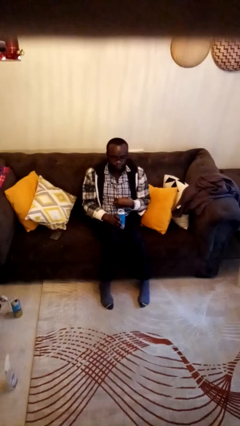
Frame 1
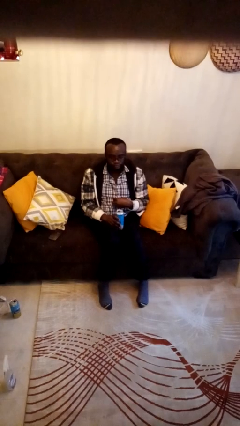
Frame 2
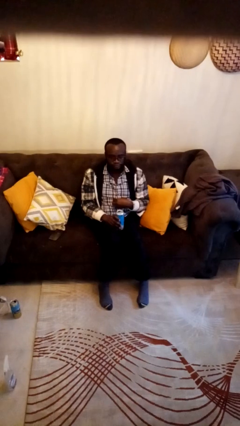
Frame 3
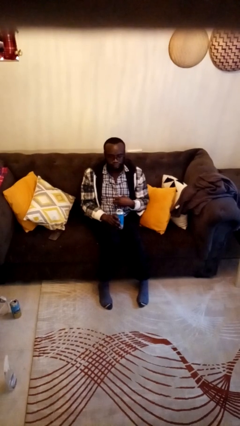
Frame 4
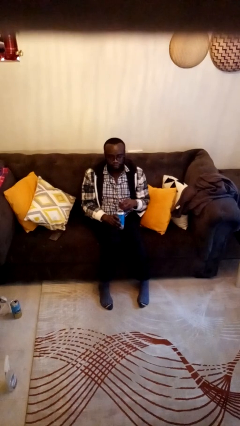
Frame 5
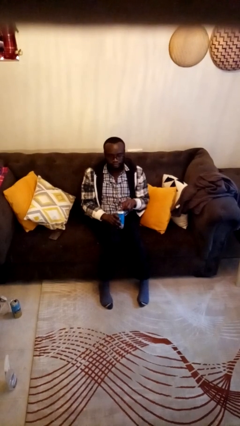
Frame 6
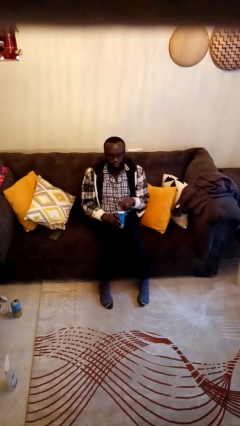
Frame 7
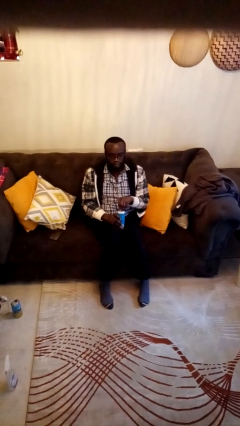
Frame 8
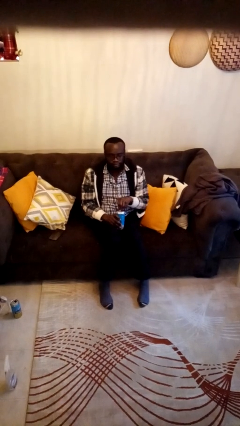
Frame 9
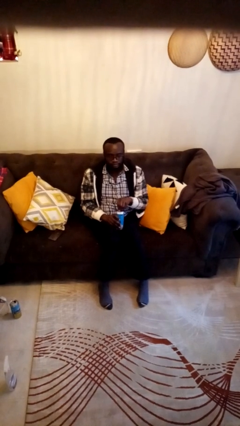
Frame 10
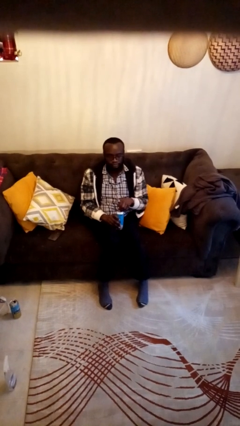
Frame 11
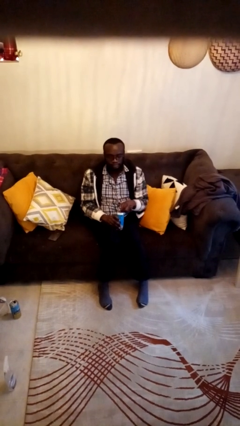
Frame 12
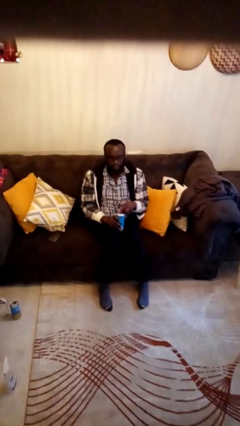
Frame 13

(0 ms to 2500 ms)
person opens beverage can

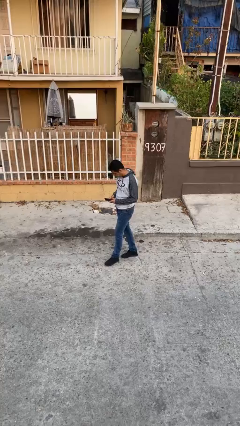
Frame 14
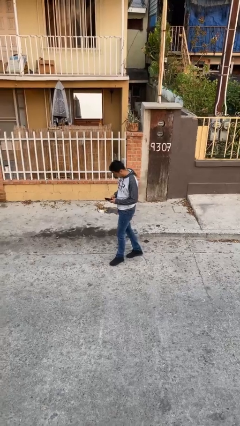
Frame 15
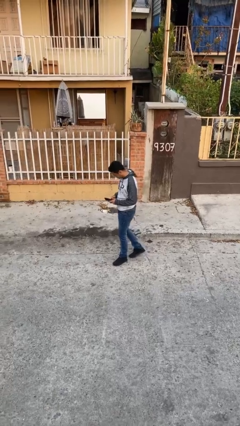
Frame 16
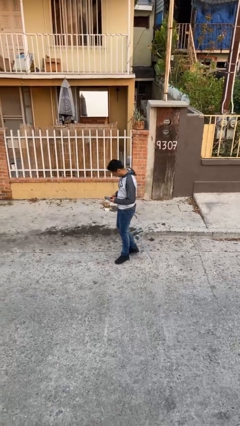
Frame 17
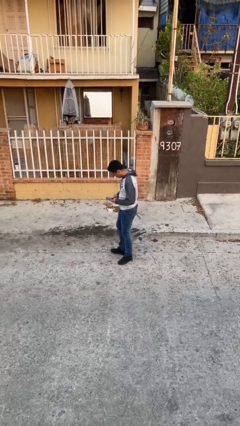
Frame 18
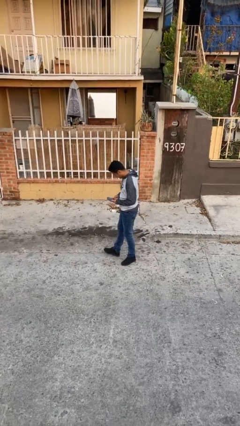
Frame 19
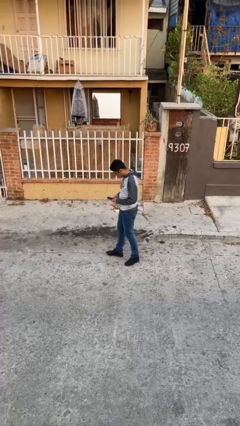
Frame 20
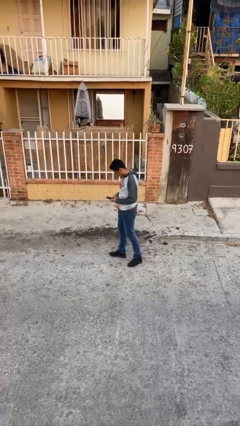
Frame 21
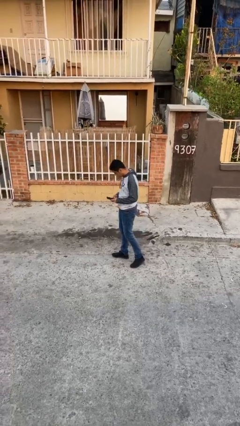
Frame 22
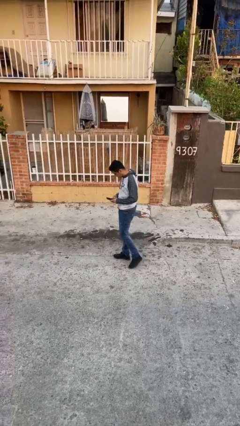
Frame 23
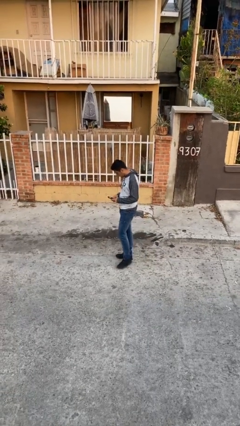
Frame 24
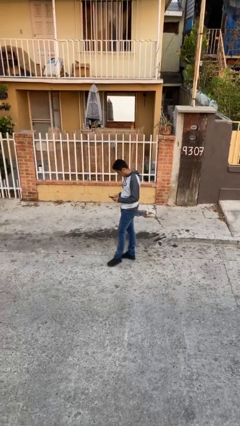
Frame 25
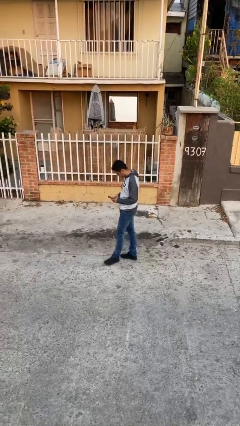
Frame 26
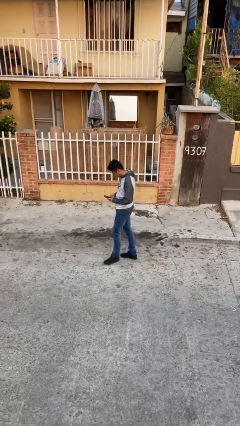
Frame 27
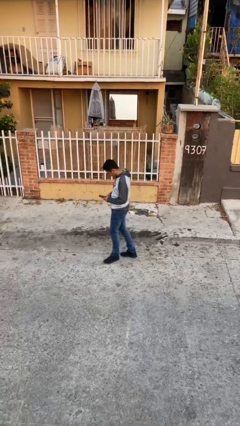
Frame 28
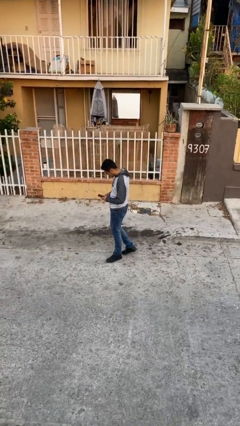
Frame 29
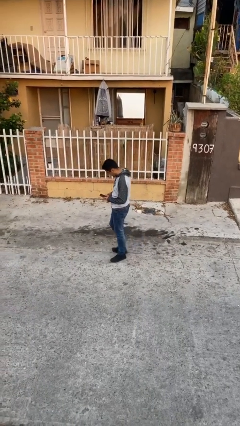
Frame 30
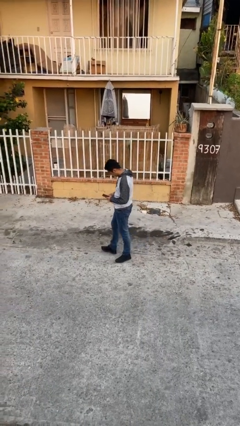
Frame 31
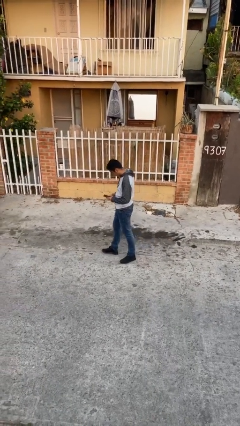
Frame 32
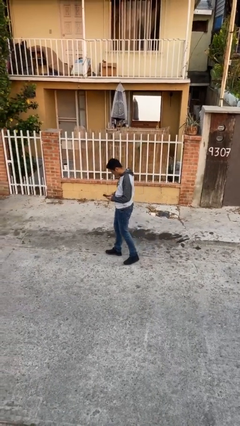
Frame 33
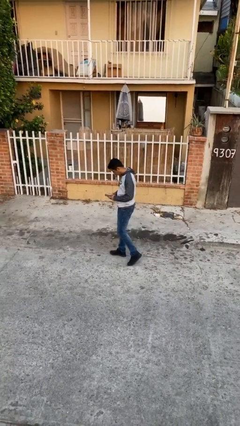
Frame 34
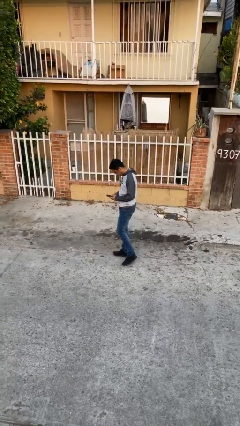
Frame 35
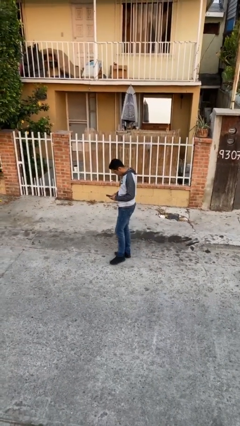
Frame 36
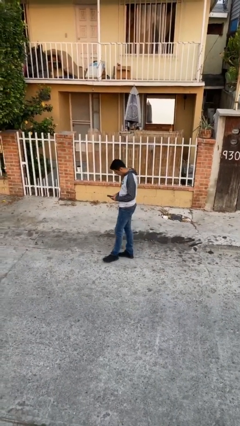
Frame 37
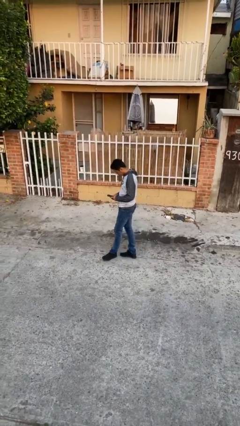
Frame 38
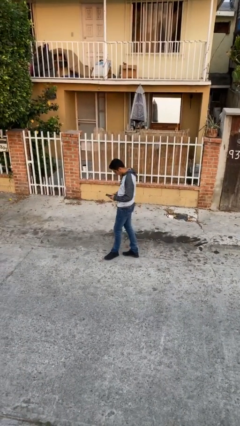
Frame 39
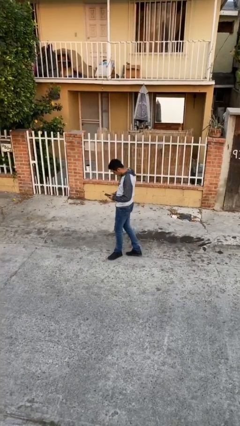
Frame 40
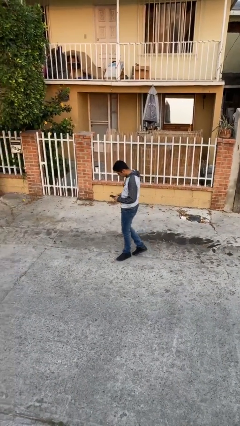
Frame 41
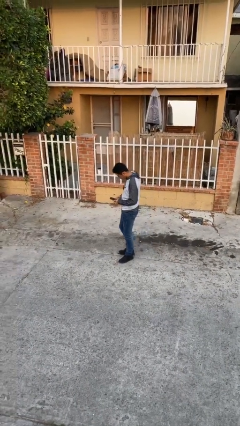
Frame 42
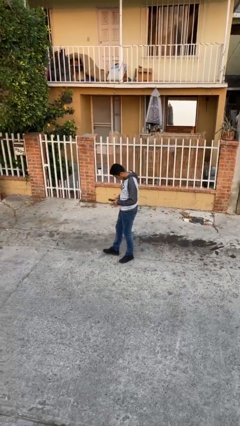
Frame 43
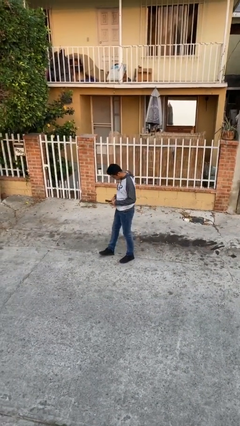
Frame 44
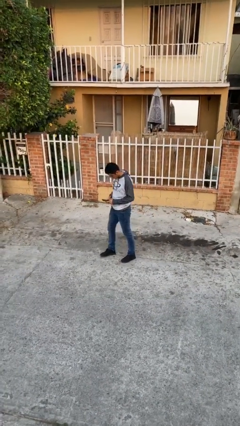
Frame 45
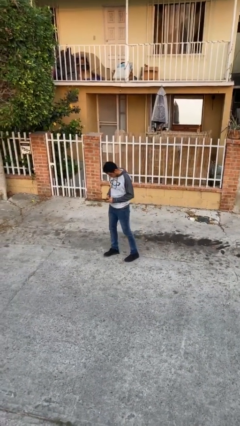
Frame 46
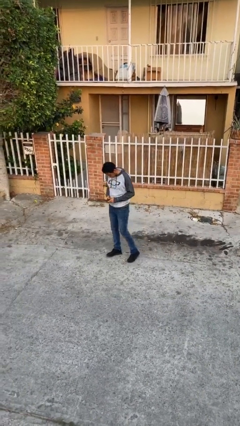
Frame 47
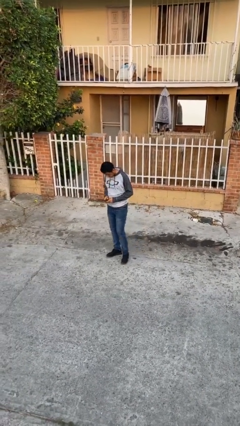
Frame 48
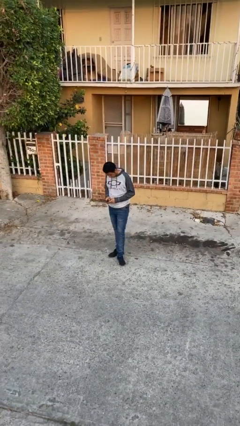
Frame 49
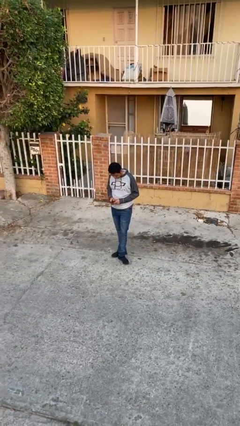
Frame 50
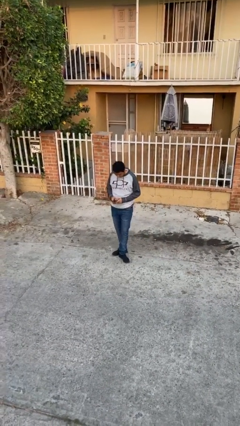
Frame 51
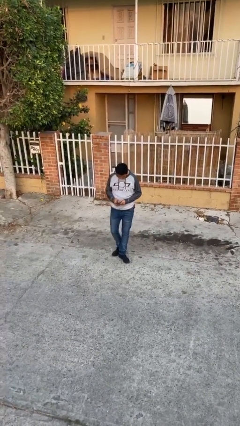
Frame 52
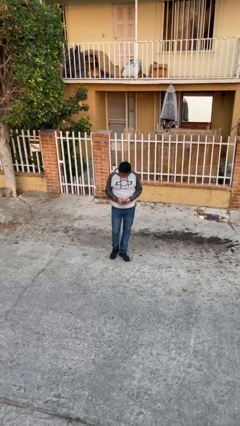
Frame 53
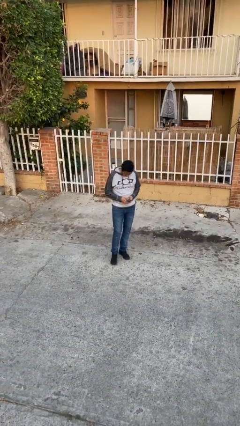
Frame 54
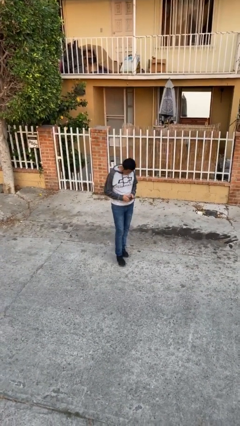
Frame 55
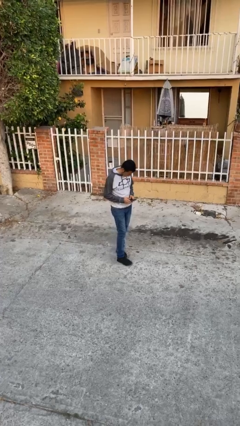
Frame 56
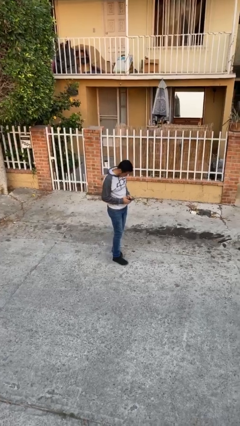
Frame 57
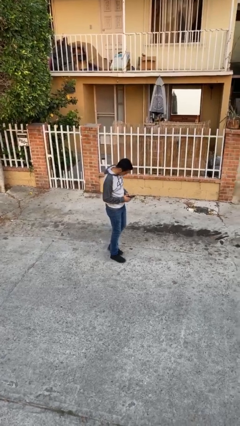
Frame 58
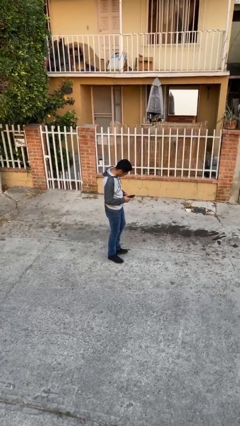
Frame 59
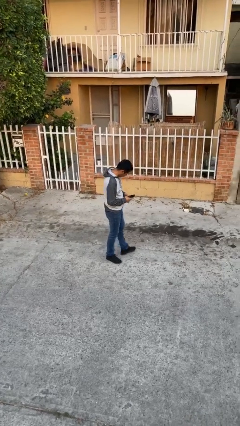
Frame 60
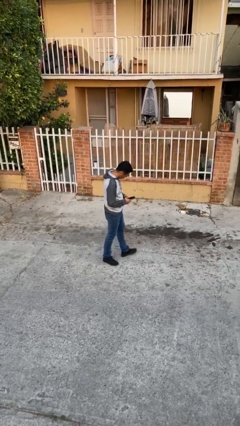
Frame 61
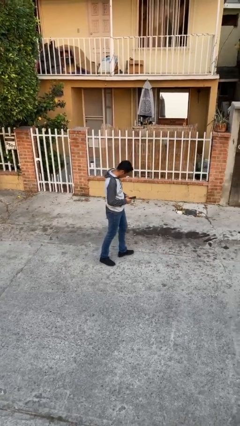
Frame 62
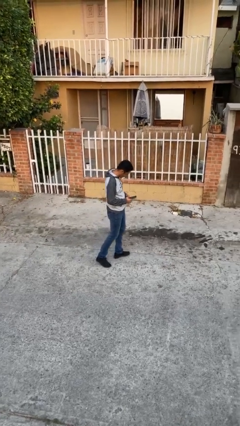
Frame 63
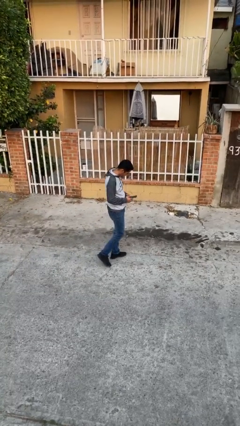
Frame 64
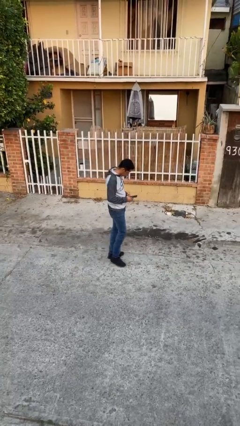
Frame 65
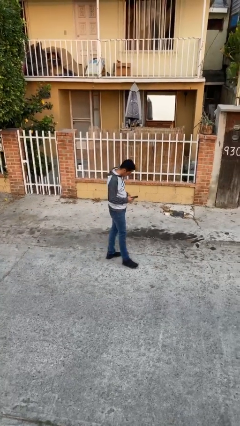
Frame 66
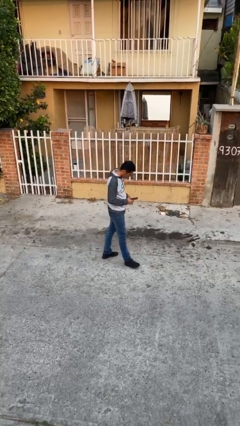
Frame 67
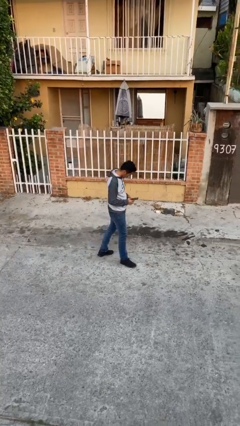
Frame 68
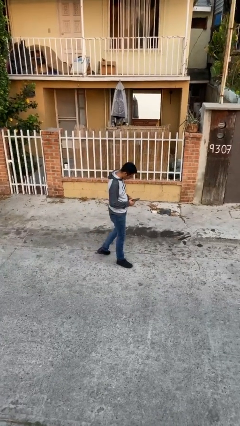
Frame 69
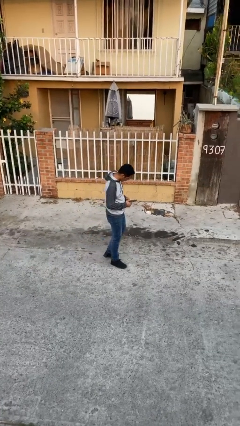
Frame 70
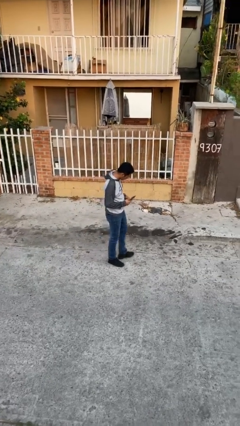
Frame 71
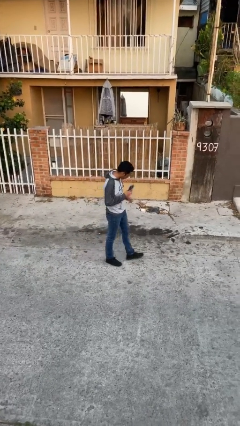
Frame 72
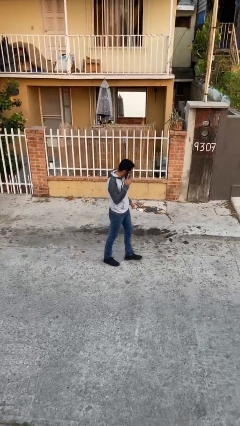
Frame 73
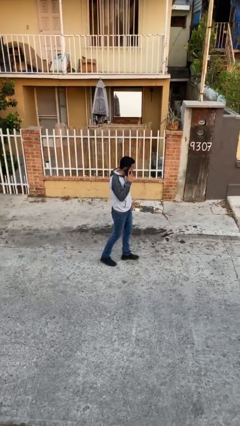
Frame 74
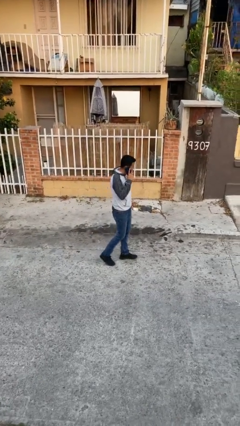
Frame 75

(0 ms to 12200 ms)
person texts on phone

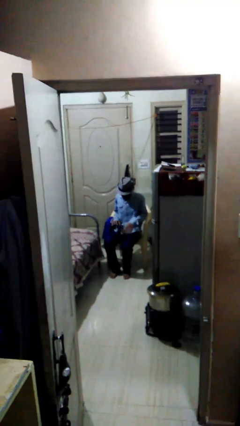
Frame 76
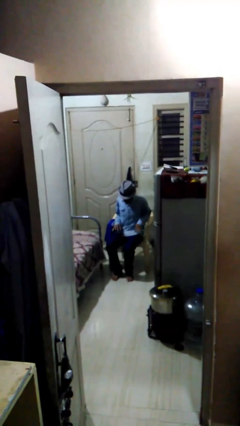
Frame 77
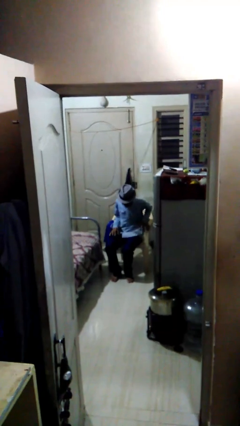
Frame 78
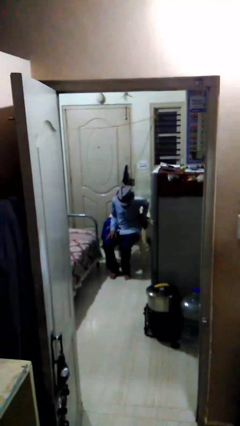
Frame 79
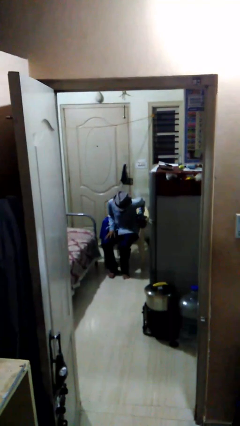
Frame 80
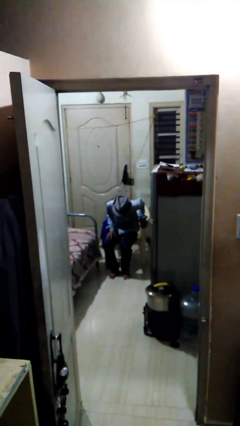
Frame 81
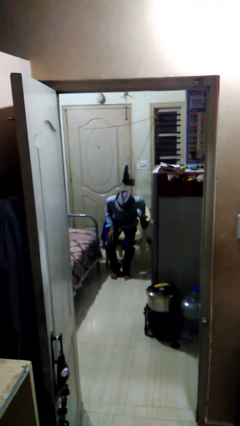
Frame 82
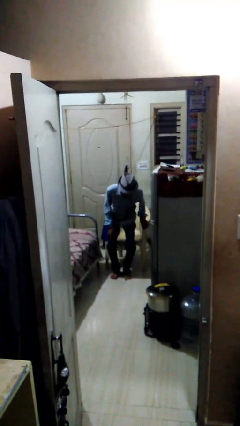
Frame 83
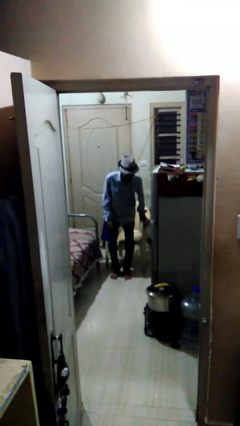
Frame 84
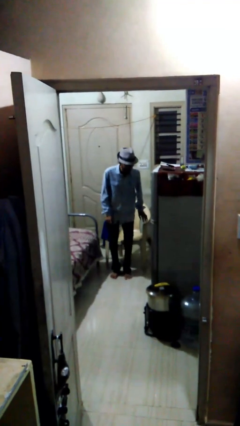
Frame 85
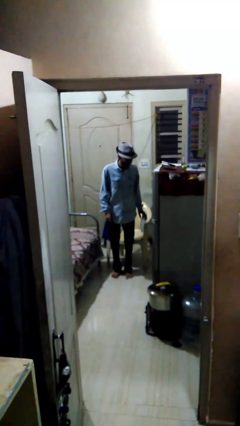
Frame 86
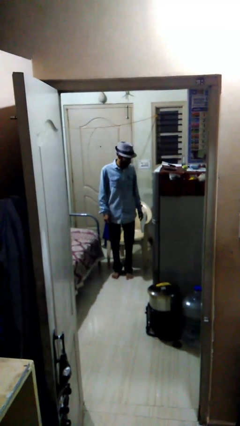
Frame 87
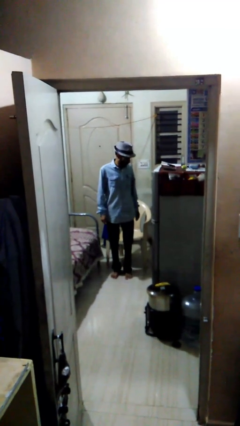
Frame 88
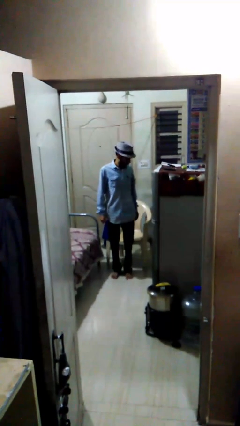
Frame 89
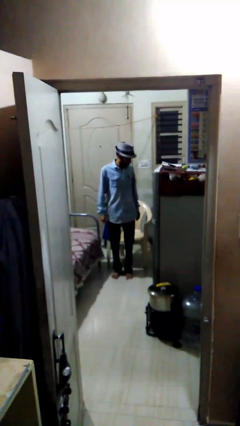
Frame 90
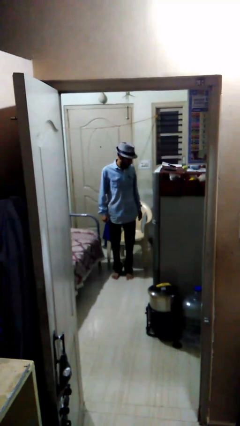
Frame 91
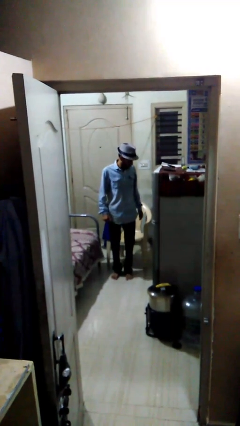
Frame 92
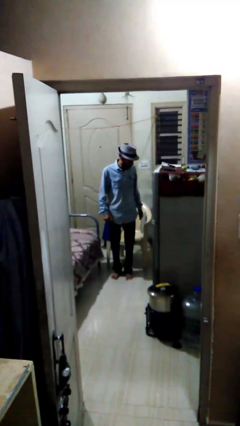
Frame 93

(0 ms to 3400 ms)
person stands up
